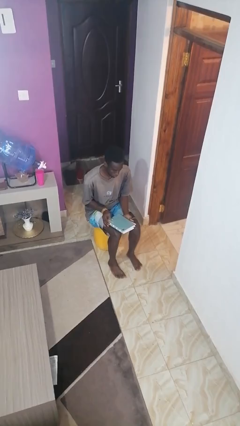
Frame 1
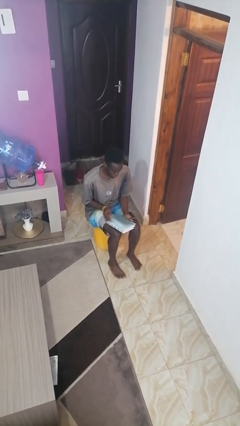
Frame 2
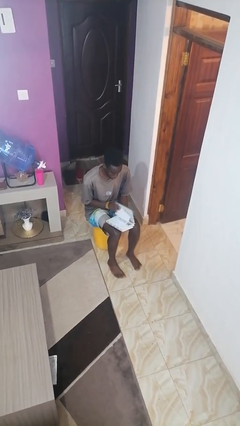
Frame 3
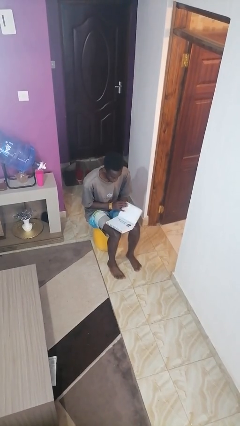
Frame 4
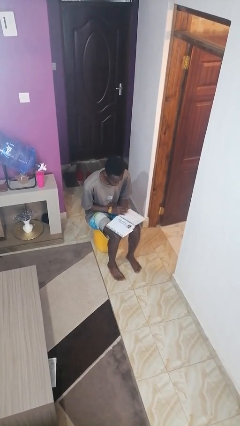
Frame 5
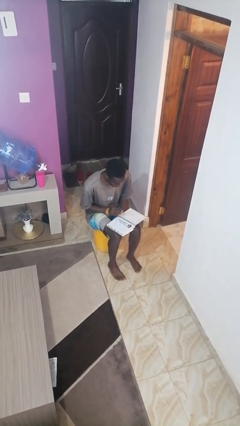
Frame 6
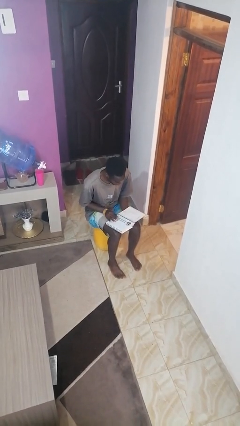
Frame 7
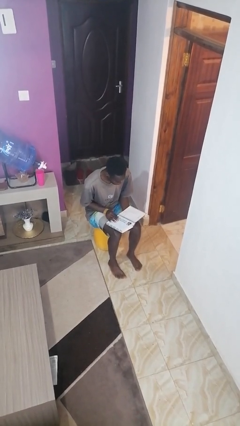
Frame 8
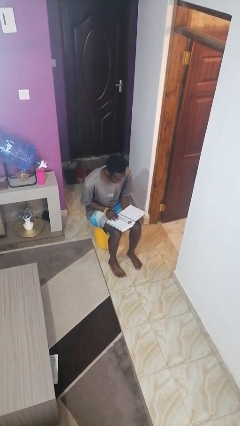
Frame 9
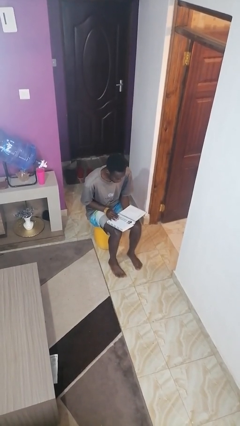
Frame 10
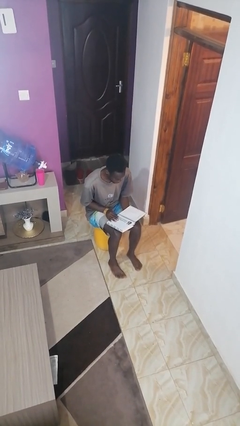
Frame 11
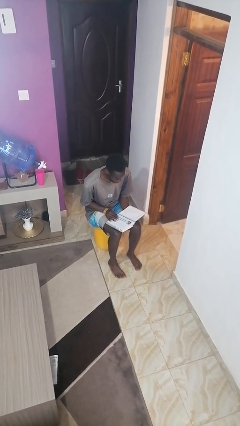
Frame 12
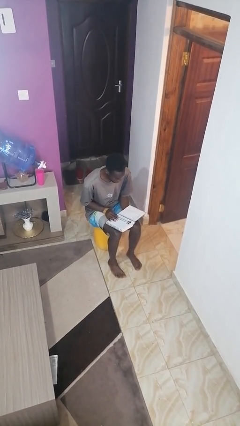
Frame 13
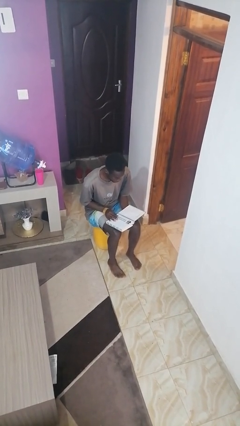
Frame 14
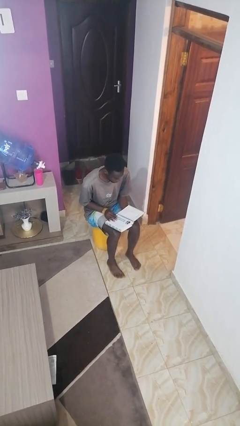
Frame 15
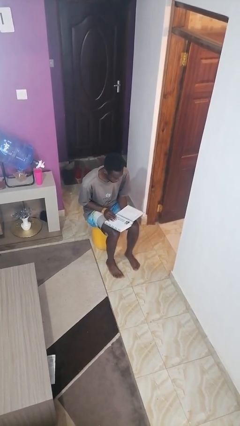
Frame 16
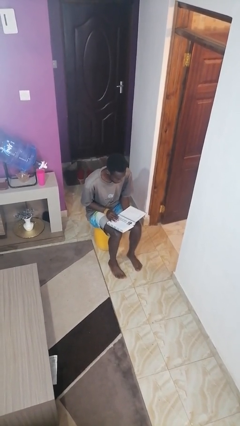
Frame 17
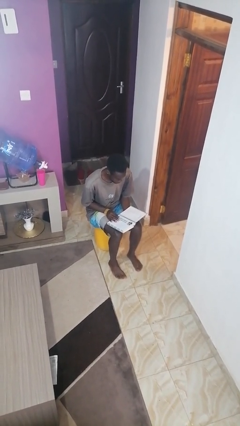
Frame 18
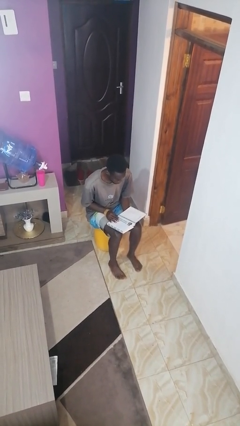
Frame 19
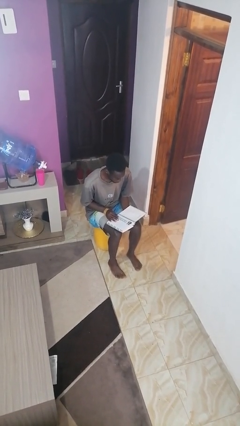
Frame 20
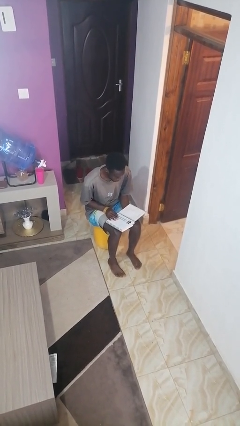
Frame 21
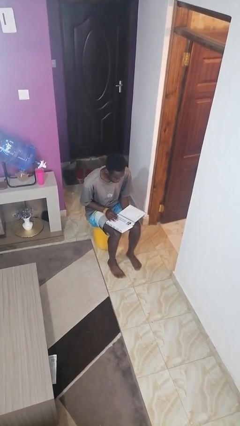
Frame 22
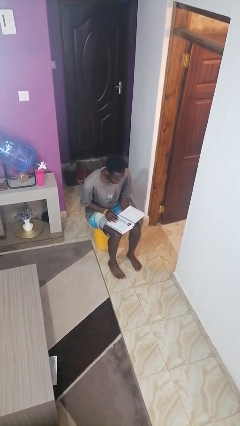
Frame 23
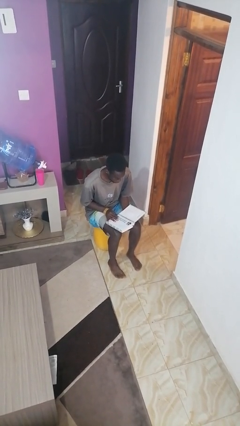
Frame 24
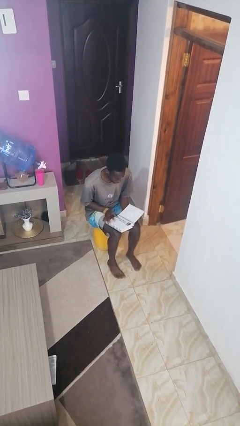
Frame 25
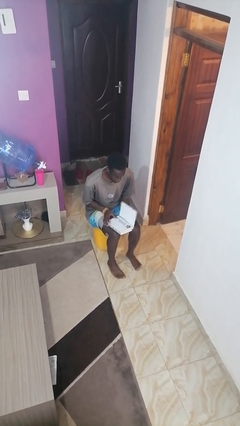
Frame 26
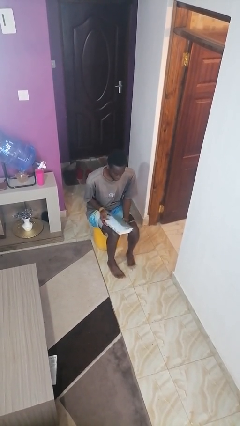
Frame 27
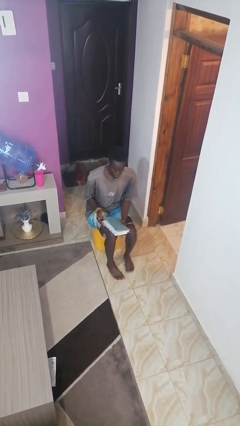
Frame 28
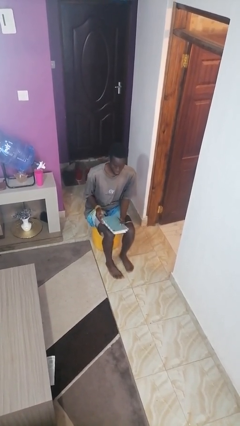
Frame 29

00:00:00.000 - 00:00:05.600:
person reads book

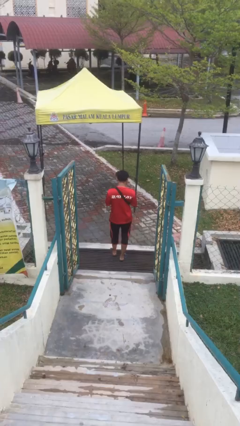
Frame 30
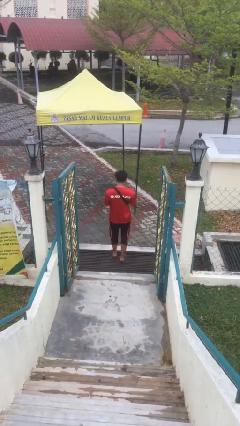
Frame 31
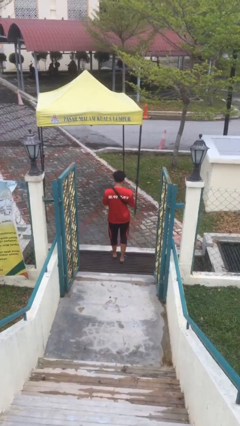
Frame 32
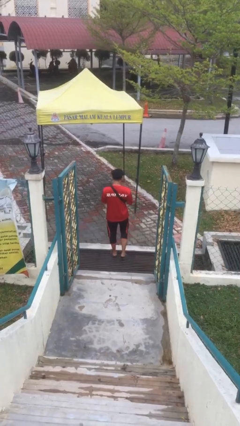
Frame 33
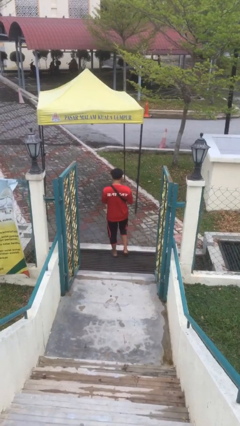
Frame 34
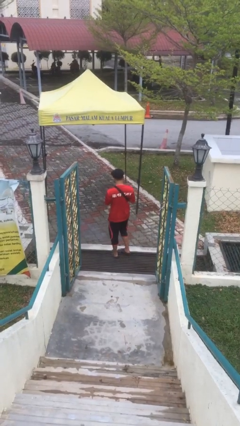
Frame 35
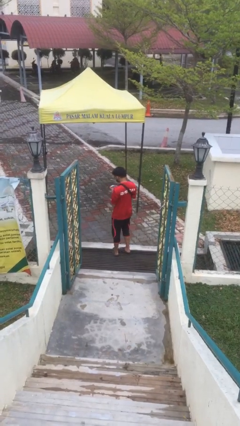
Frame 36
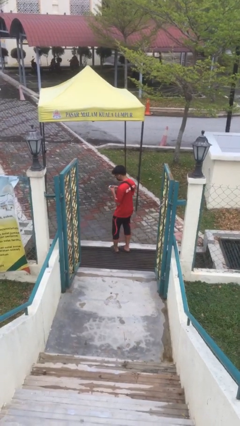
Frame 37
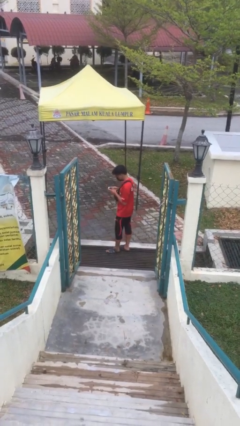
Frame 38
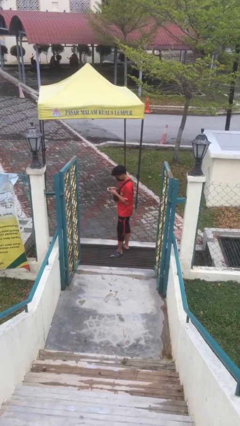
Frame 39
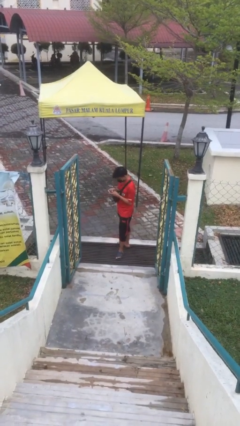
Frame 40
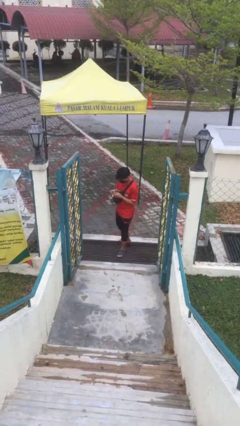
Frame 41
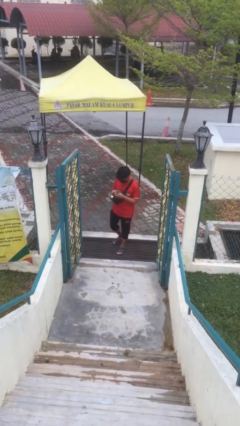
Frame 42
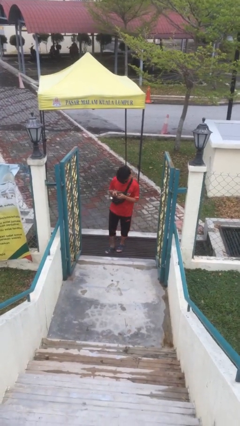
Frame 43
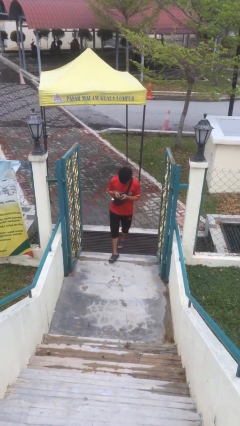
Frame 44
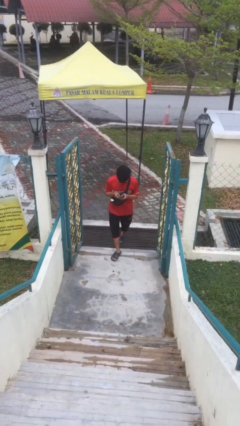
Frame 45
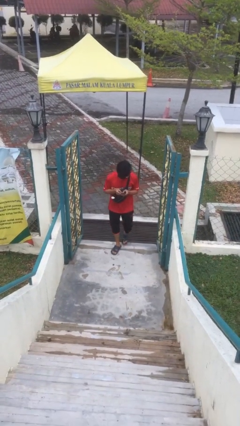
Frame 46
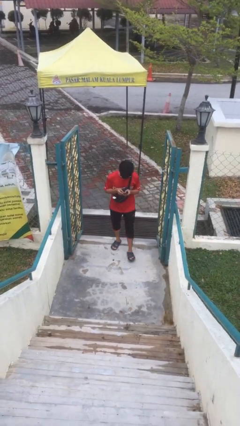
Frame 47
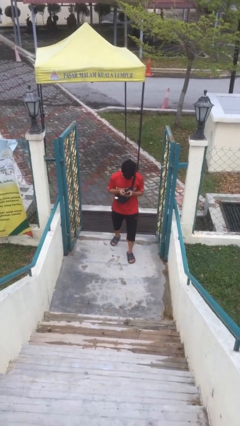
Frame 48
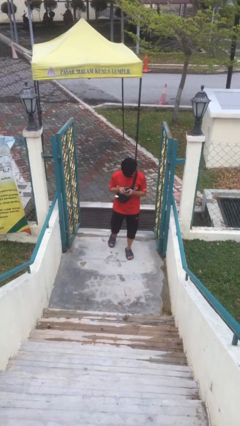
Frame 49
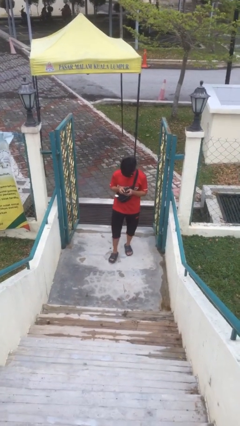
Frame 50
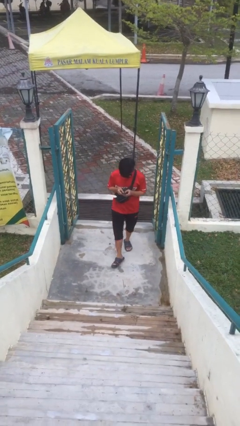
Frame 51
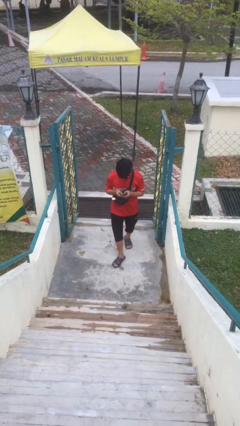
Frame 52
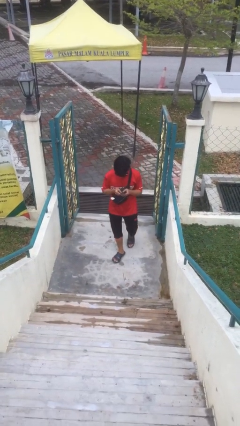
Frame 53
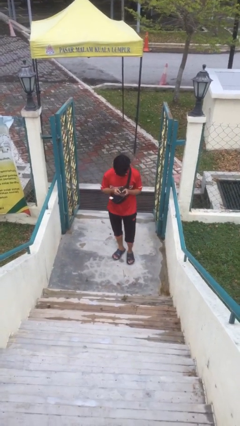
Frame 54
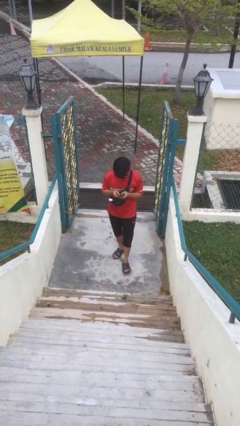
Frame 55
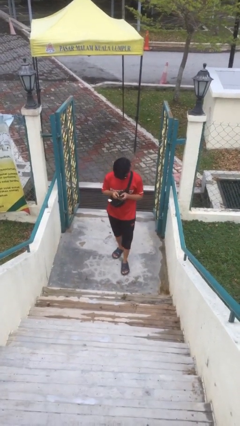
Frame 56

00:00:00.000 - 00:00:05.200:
person enters scene through structure

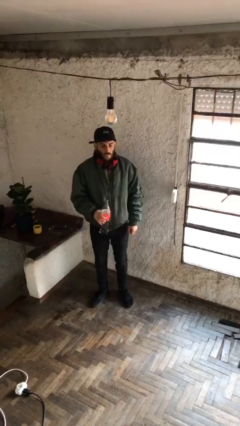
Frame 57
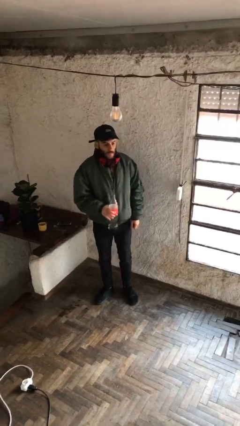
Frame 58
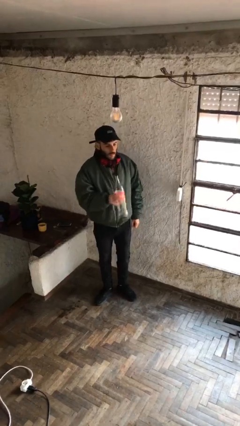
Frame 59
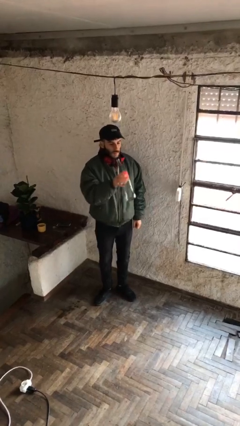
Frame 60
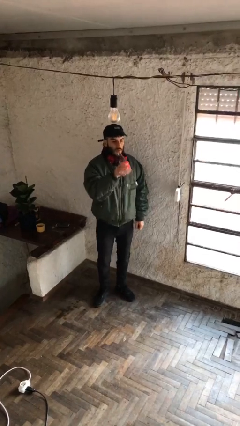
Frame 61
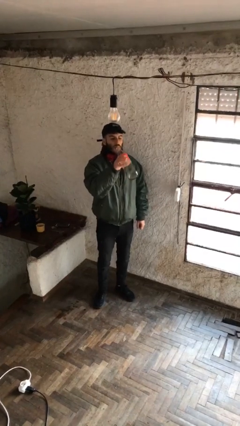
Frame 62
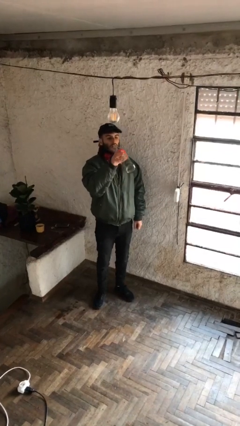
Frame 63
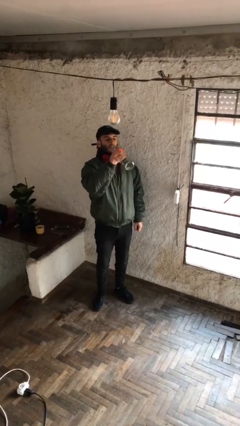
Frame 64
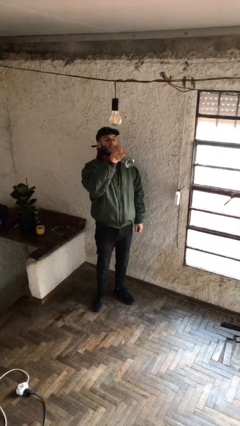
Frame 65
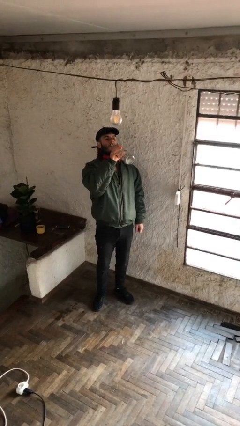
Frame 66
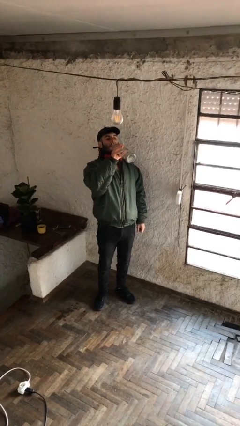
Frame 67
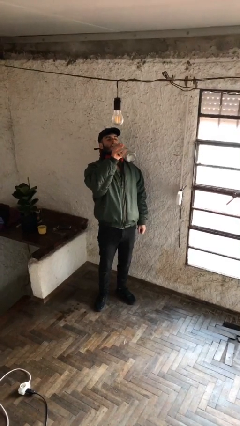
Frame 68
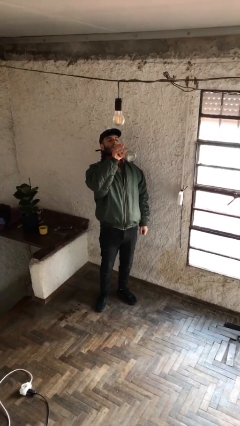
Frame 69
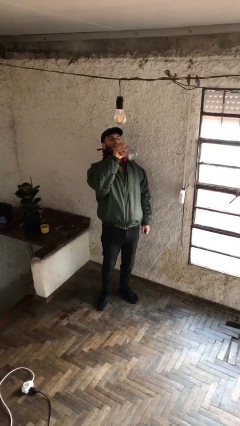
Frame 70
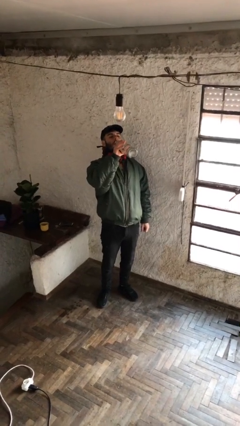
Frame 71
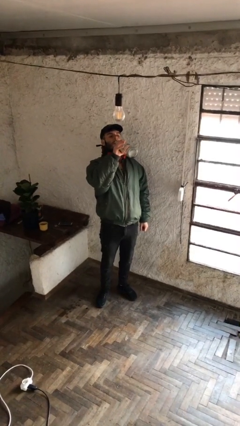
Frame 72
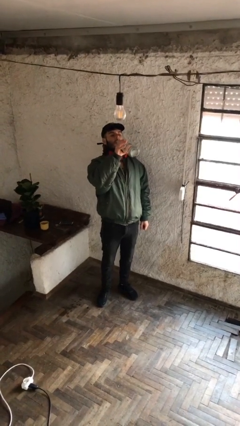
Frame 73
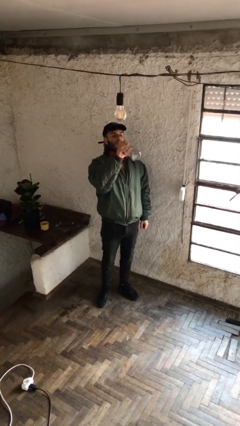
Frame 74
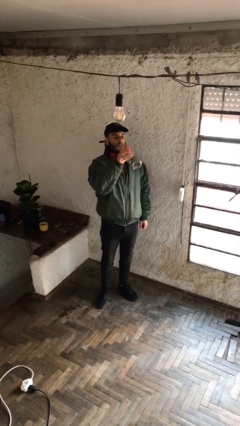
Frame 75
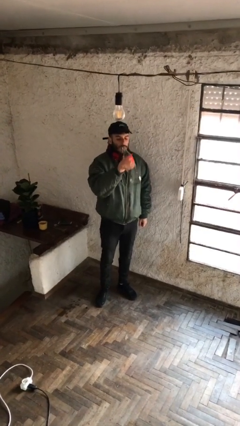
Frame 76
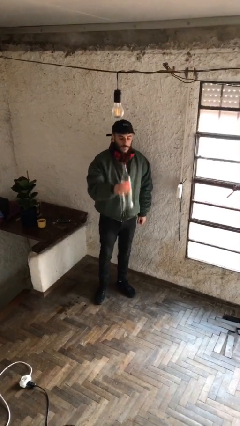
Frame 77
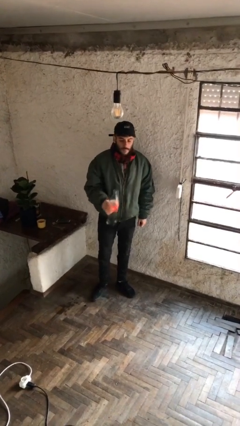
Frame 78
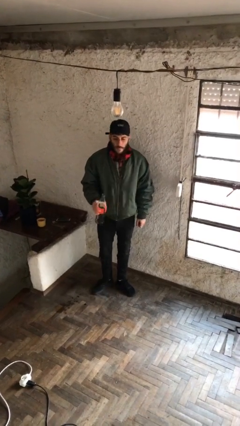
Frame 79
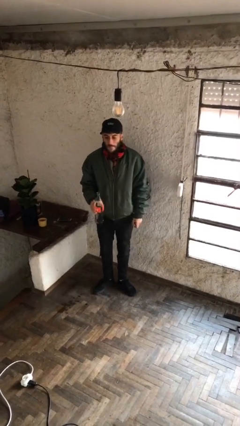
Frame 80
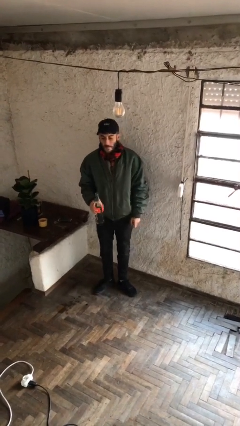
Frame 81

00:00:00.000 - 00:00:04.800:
person drinks from bottle

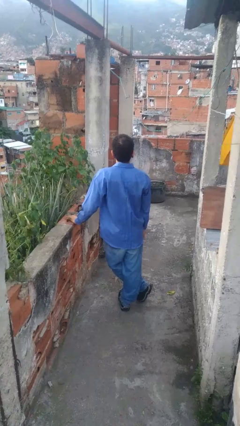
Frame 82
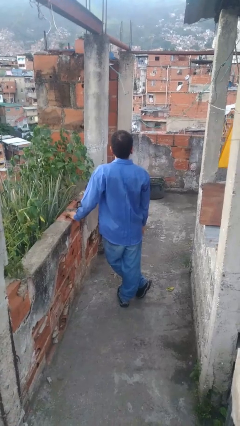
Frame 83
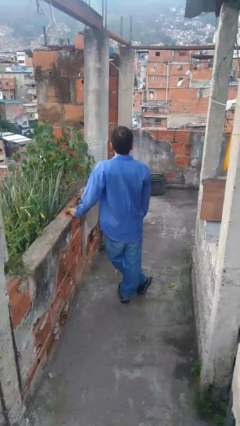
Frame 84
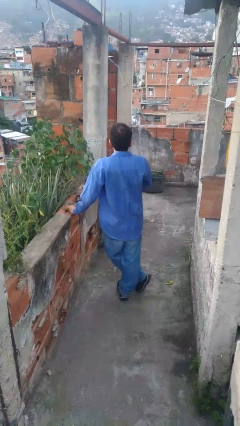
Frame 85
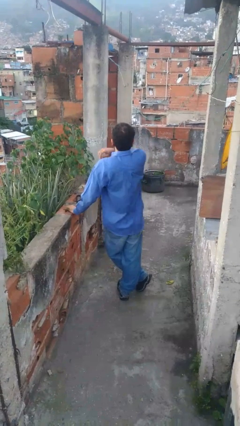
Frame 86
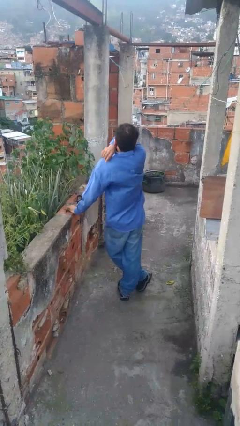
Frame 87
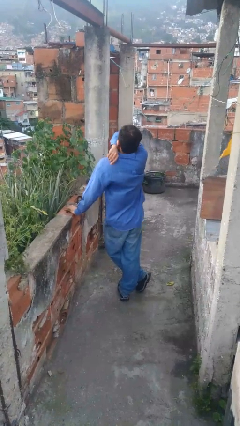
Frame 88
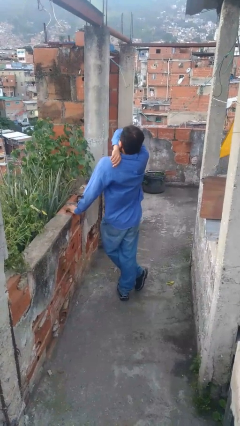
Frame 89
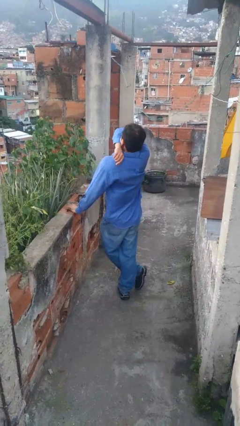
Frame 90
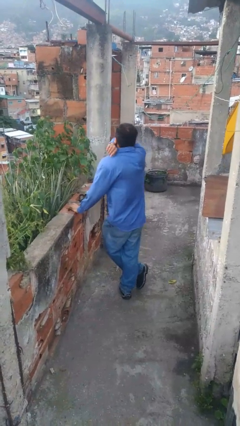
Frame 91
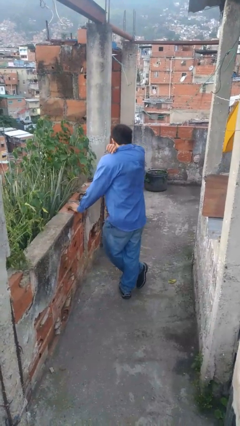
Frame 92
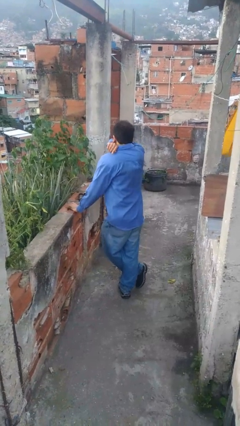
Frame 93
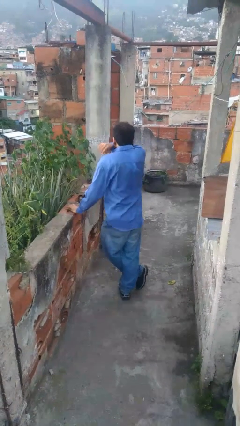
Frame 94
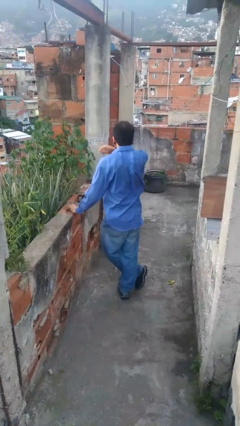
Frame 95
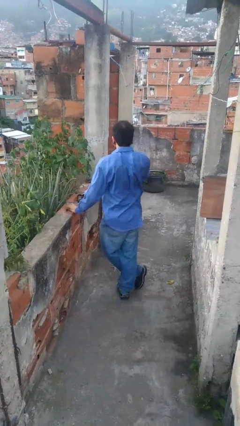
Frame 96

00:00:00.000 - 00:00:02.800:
person sneezes into arm
